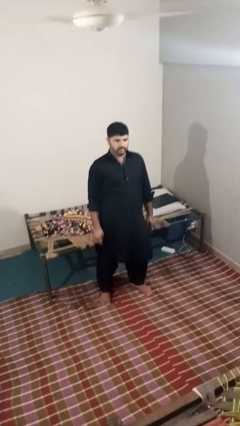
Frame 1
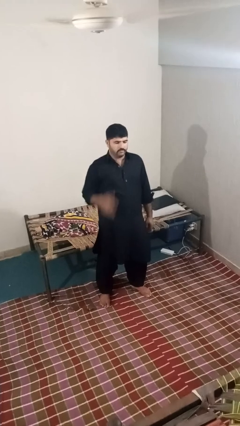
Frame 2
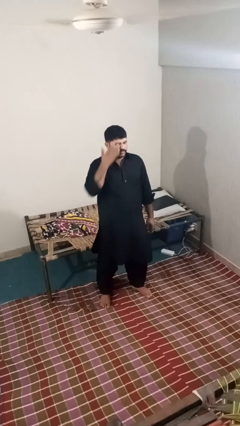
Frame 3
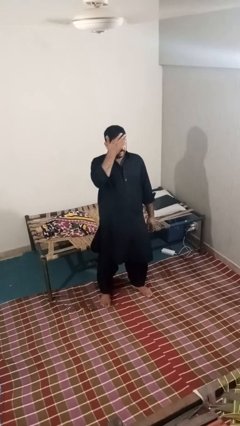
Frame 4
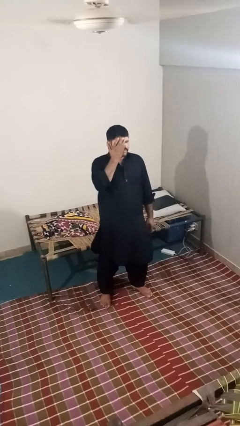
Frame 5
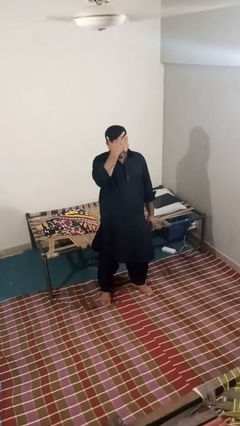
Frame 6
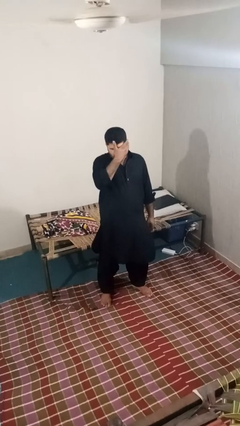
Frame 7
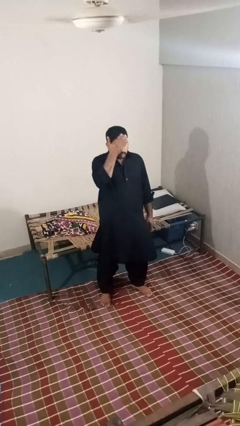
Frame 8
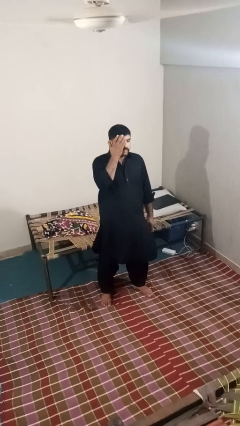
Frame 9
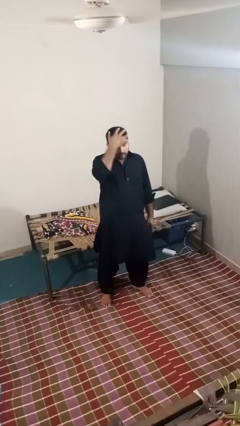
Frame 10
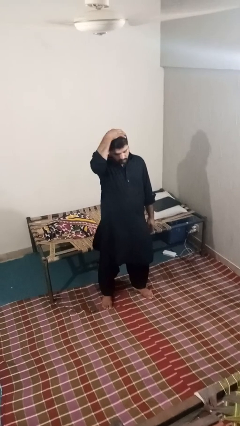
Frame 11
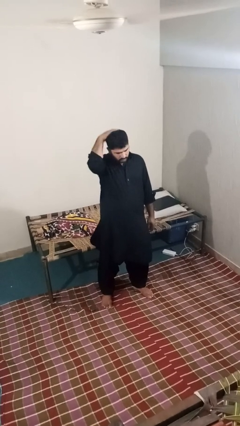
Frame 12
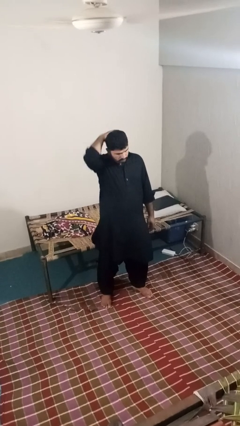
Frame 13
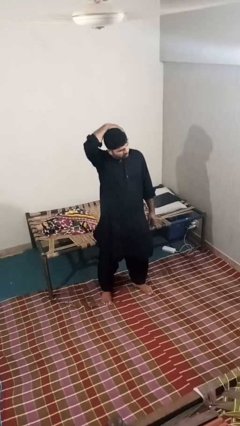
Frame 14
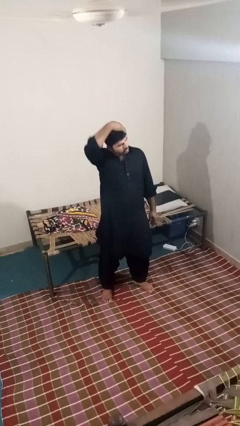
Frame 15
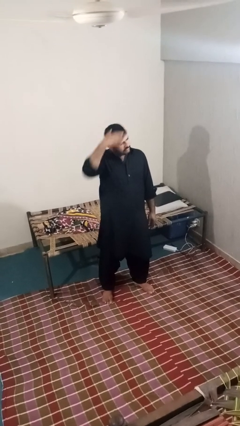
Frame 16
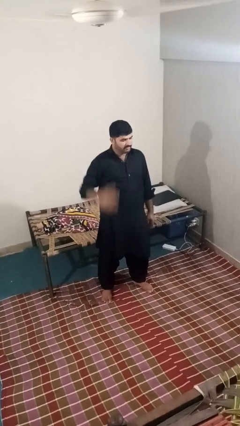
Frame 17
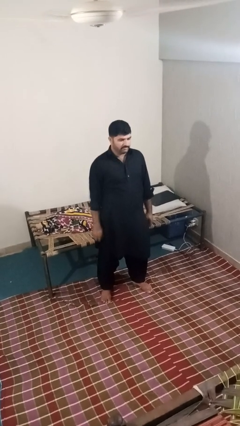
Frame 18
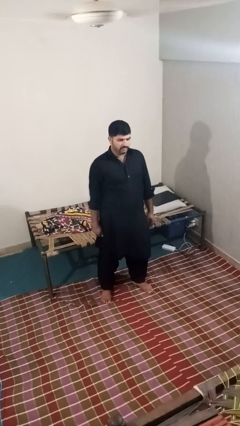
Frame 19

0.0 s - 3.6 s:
person scratches face

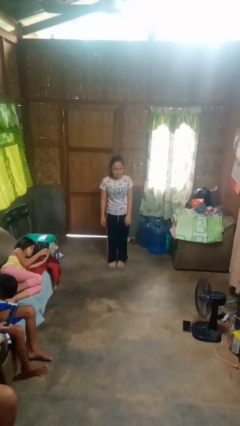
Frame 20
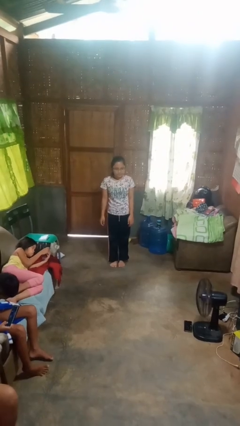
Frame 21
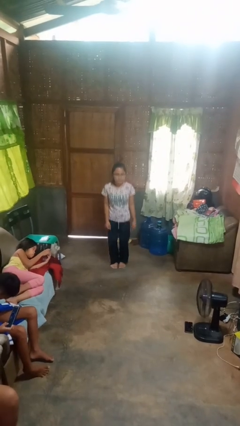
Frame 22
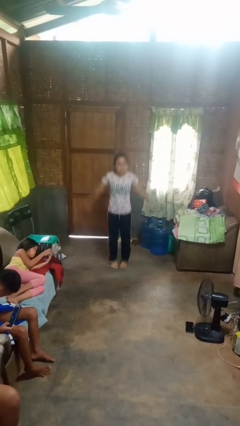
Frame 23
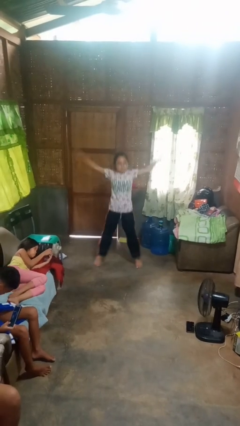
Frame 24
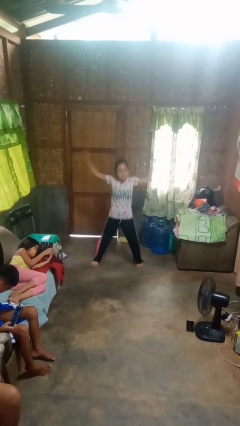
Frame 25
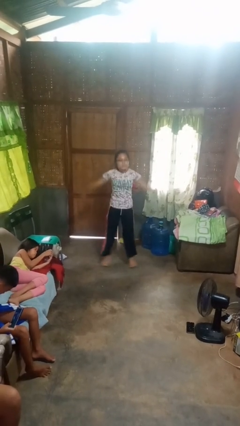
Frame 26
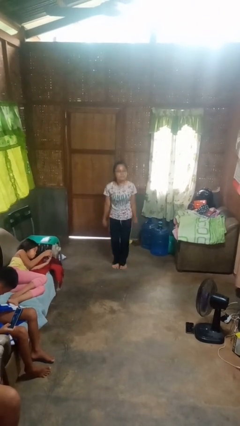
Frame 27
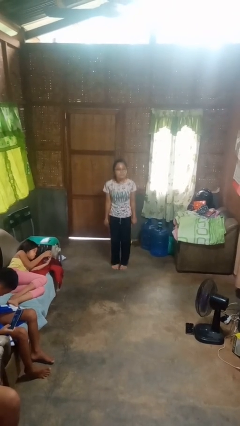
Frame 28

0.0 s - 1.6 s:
person exercises with jumping jacks

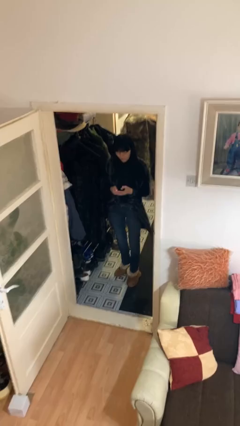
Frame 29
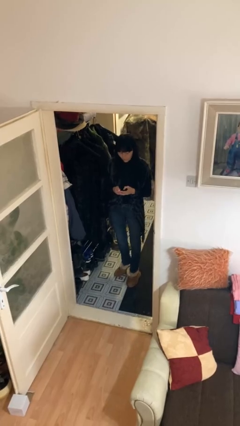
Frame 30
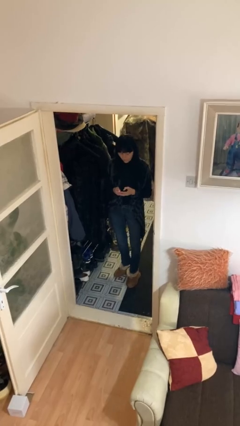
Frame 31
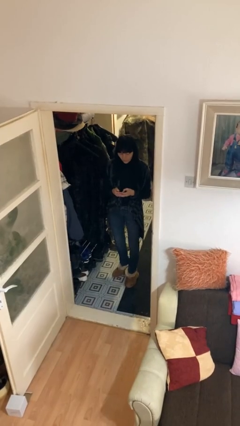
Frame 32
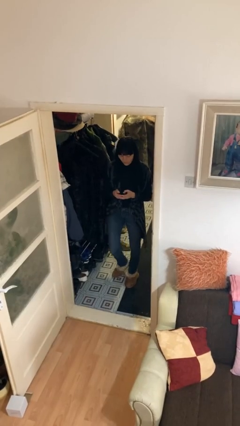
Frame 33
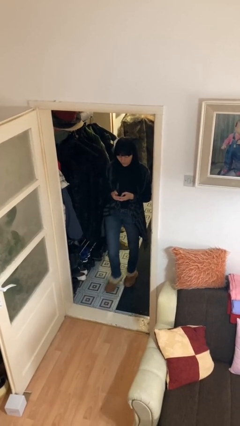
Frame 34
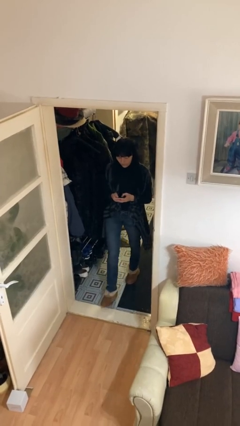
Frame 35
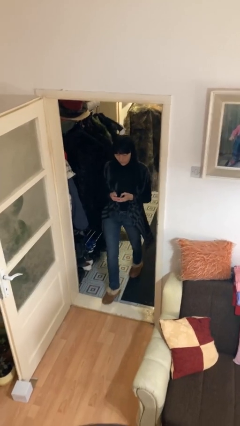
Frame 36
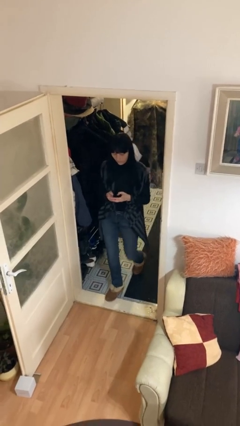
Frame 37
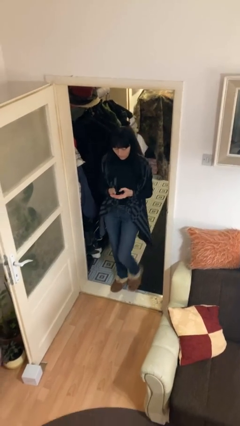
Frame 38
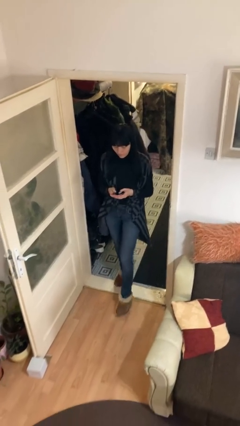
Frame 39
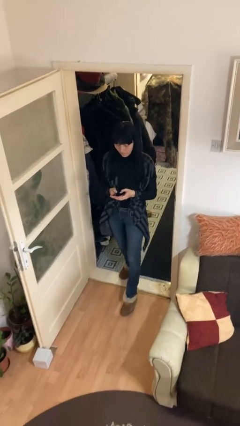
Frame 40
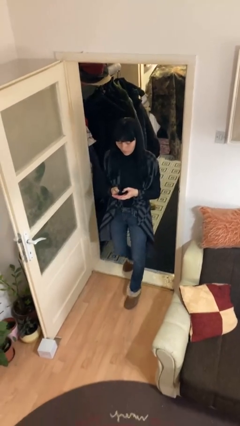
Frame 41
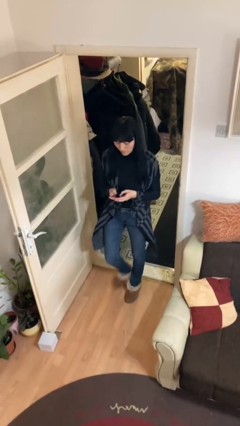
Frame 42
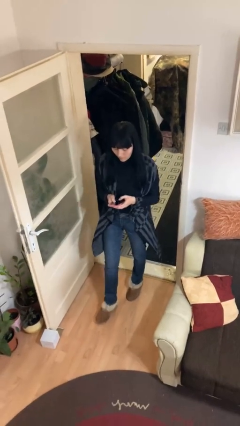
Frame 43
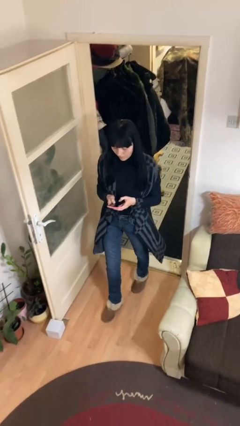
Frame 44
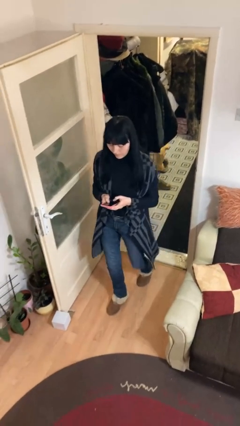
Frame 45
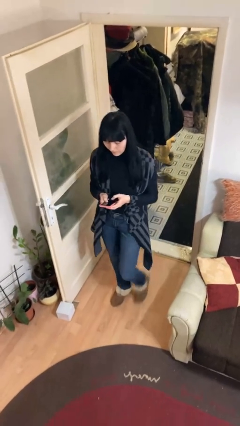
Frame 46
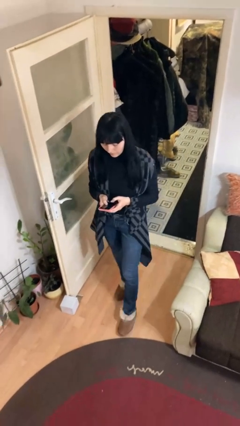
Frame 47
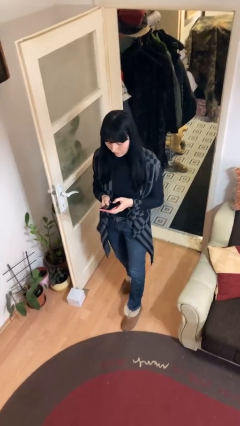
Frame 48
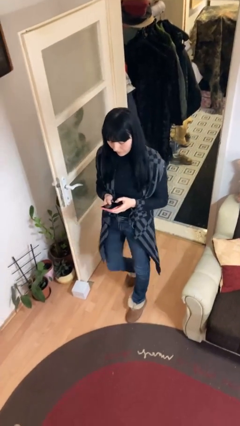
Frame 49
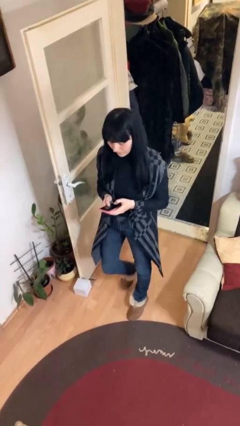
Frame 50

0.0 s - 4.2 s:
person enters scene through structure

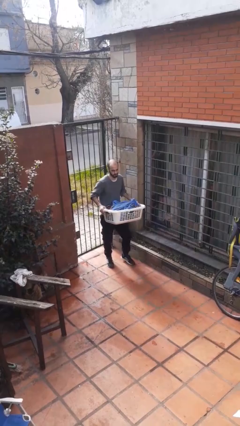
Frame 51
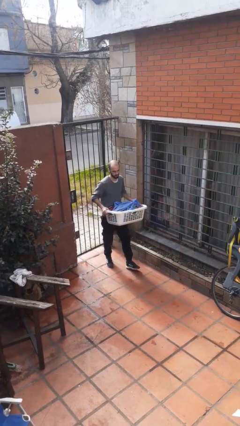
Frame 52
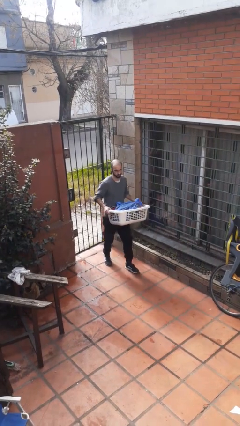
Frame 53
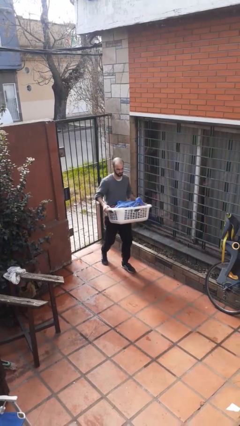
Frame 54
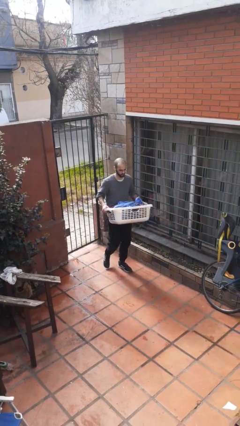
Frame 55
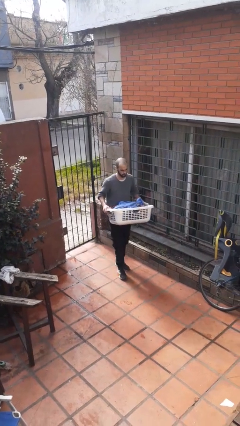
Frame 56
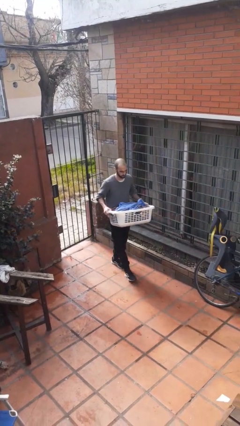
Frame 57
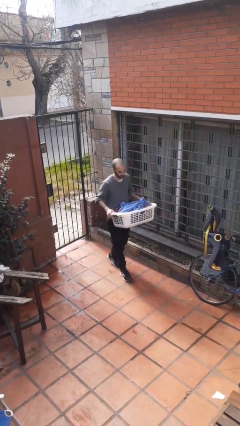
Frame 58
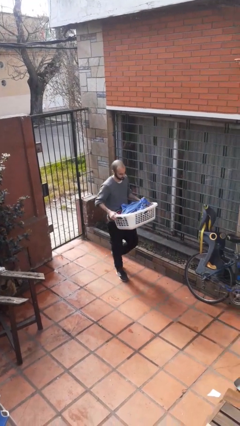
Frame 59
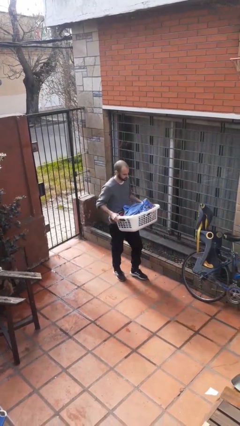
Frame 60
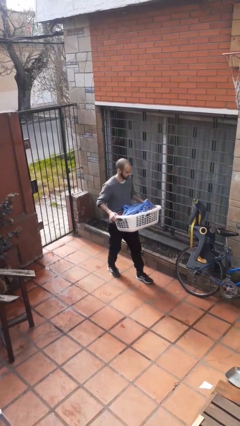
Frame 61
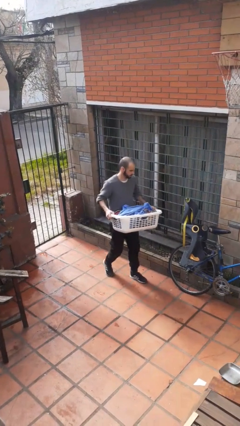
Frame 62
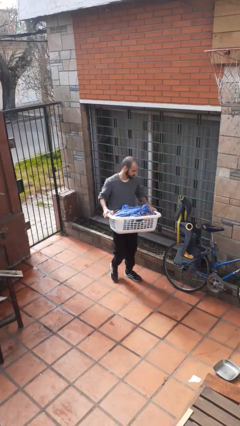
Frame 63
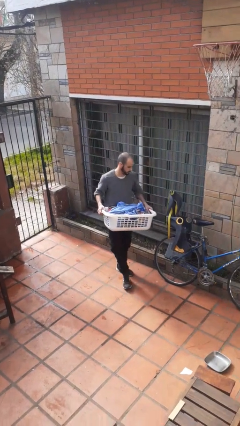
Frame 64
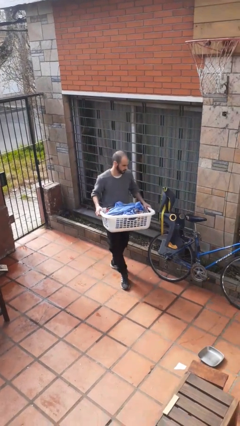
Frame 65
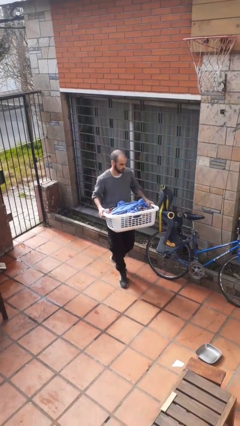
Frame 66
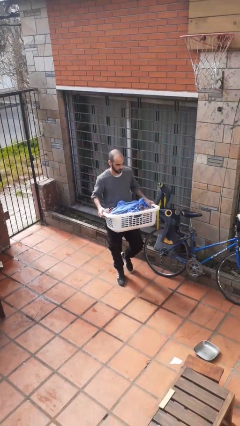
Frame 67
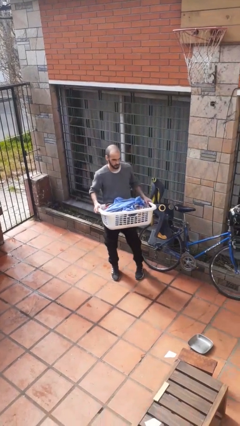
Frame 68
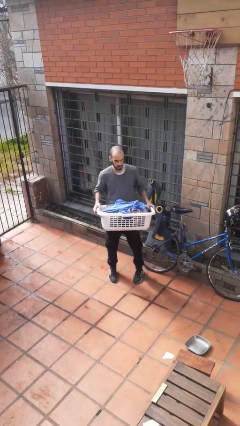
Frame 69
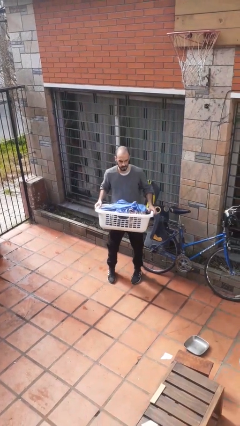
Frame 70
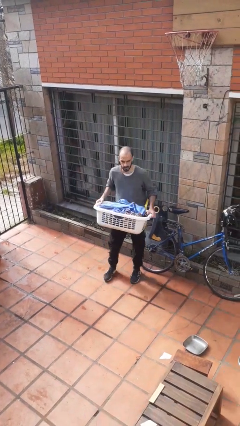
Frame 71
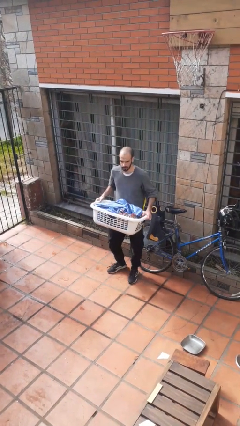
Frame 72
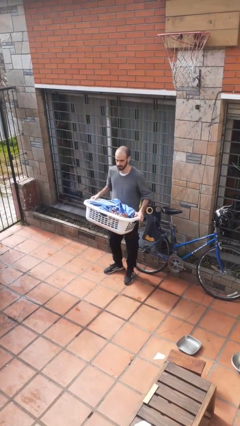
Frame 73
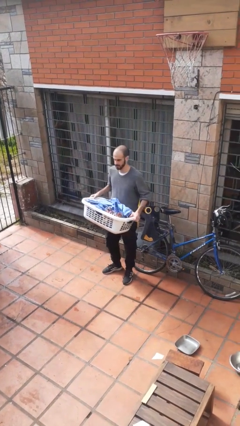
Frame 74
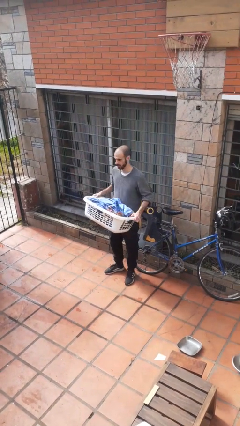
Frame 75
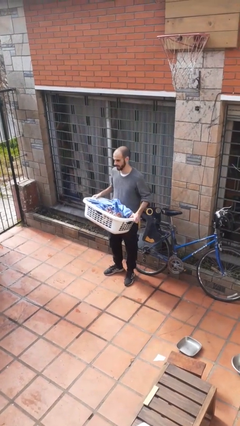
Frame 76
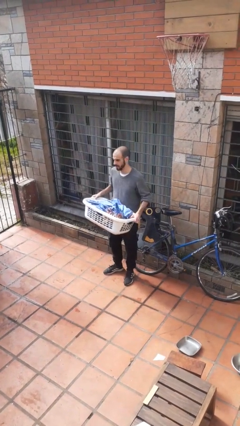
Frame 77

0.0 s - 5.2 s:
person carries laundry basket

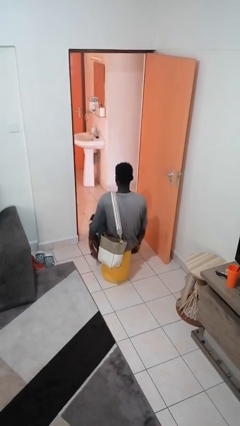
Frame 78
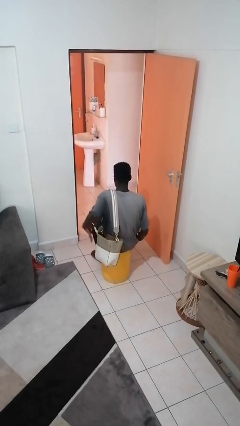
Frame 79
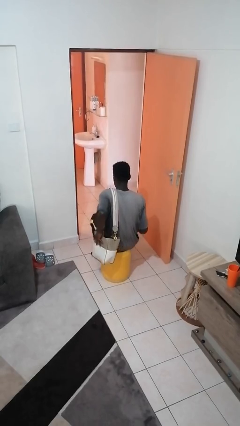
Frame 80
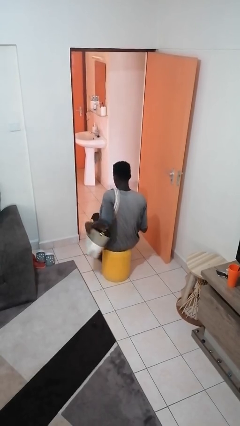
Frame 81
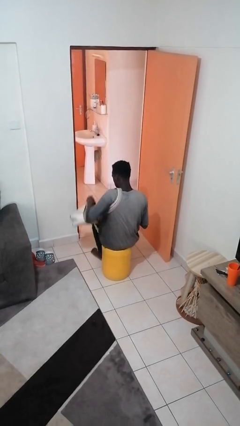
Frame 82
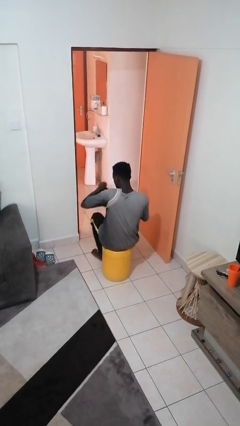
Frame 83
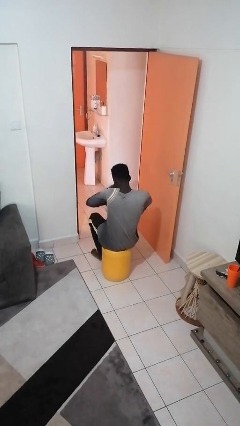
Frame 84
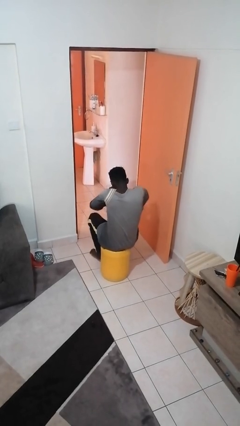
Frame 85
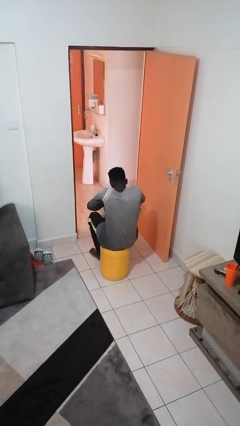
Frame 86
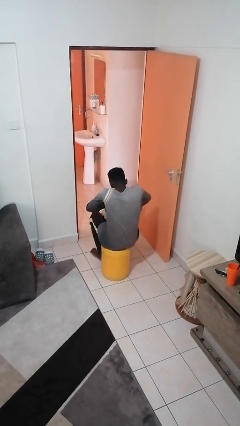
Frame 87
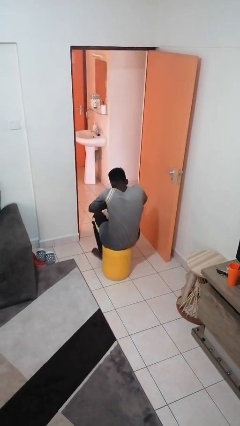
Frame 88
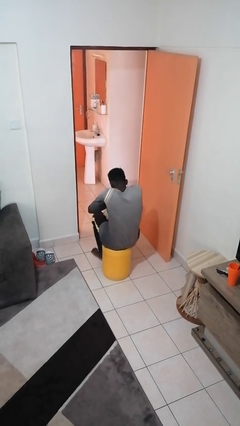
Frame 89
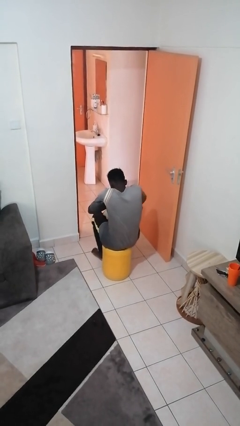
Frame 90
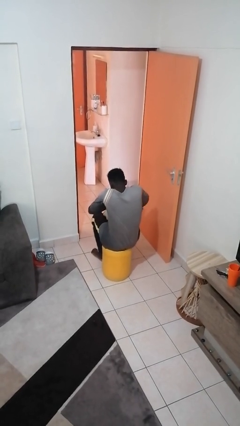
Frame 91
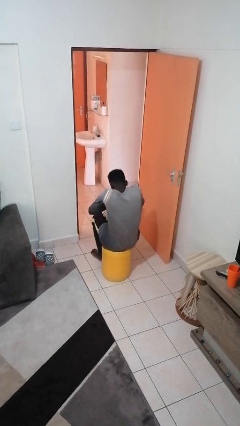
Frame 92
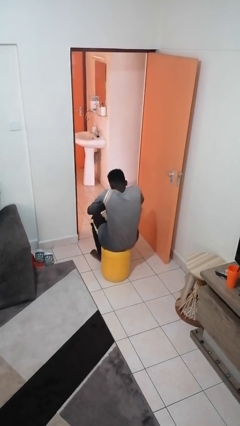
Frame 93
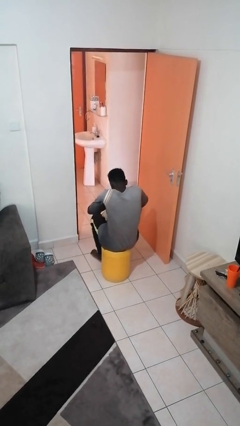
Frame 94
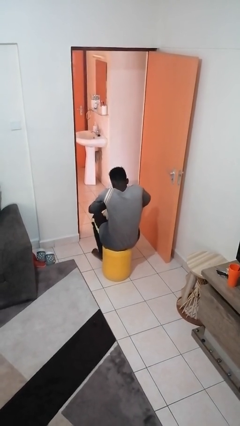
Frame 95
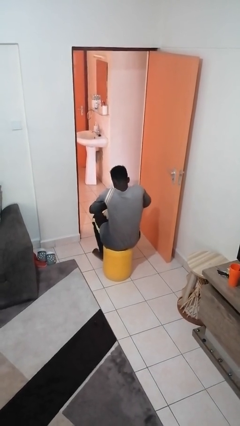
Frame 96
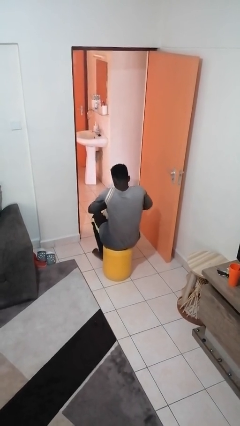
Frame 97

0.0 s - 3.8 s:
person searches in purse
